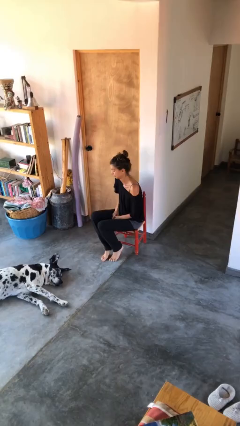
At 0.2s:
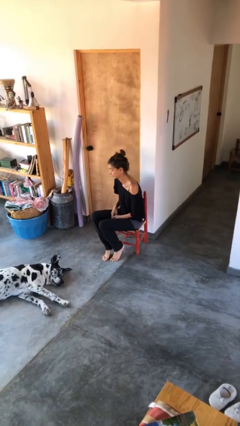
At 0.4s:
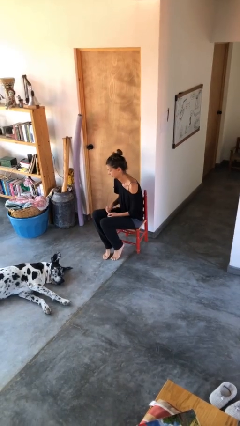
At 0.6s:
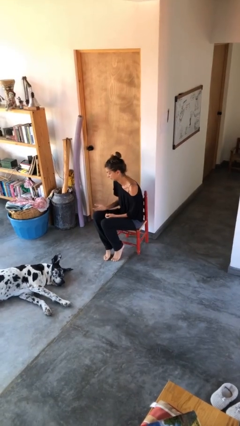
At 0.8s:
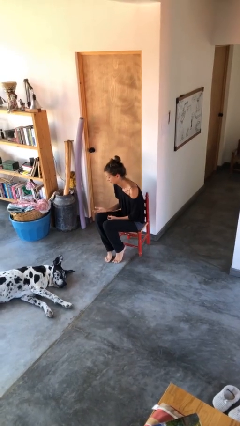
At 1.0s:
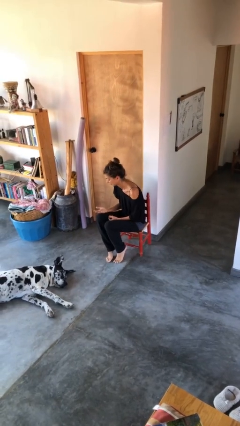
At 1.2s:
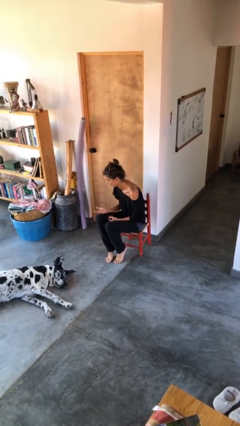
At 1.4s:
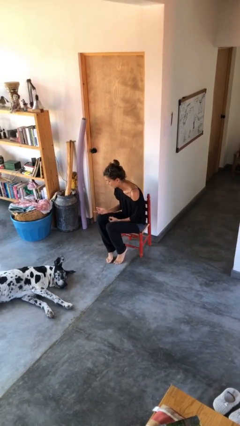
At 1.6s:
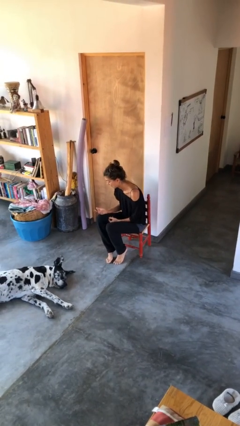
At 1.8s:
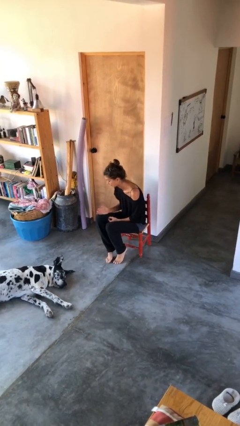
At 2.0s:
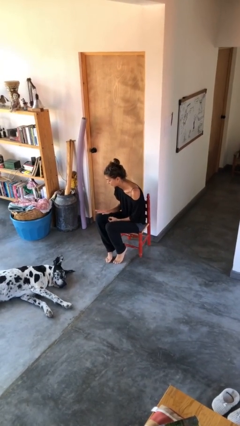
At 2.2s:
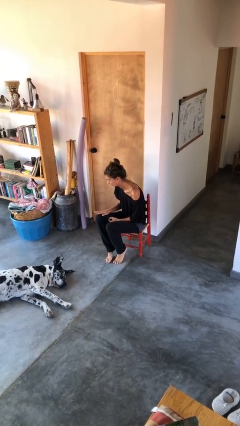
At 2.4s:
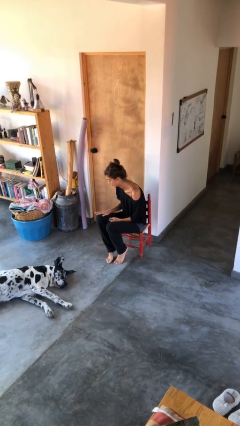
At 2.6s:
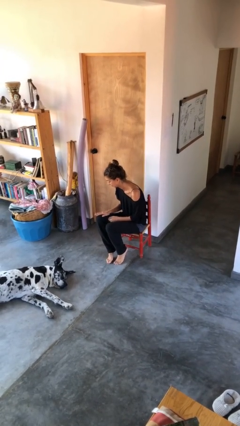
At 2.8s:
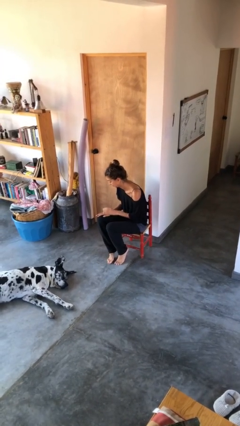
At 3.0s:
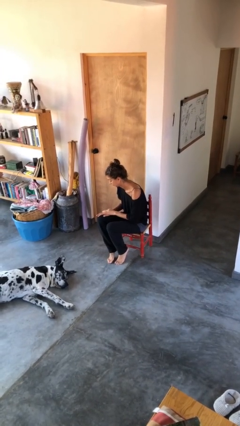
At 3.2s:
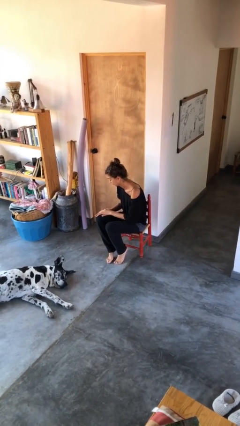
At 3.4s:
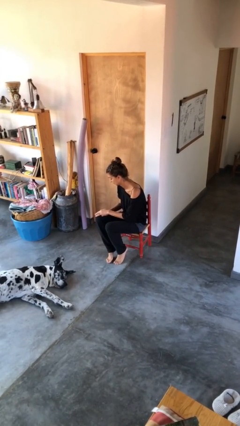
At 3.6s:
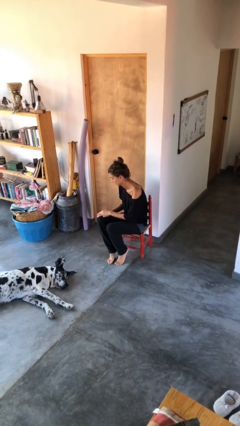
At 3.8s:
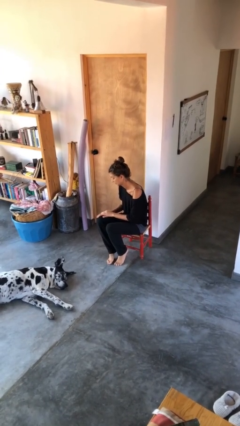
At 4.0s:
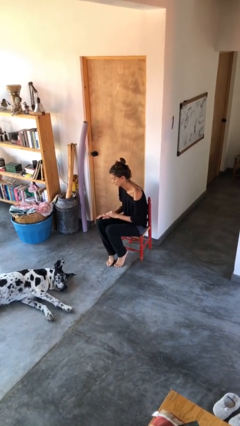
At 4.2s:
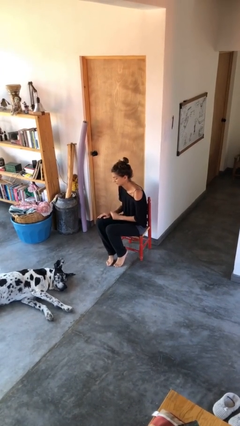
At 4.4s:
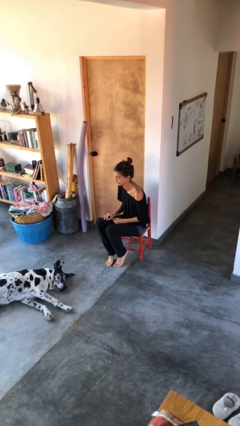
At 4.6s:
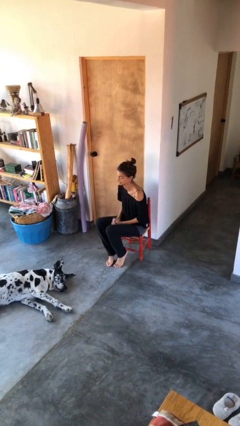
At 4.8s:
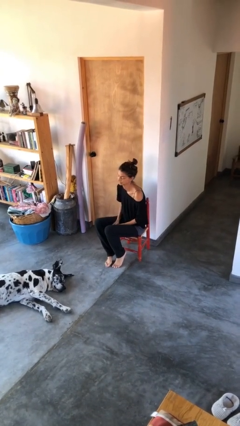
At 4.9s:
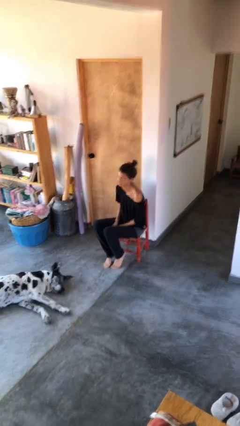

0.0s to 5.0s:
person looks at hands in lap

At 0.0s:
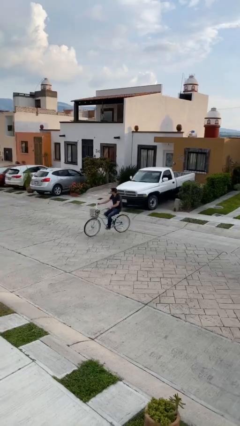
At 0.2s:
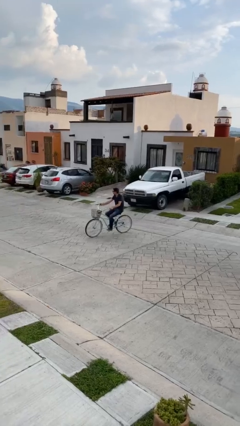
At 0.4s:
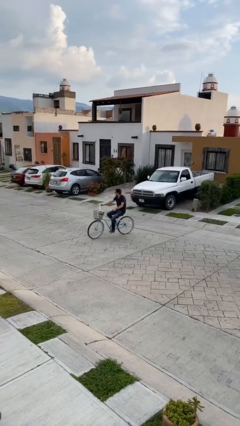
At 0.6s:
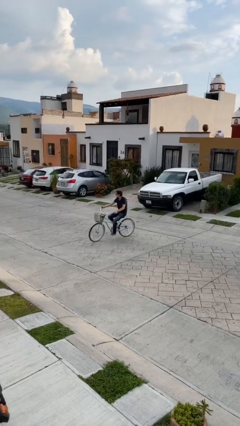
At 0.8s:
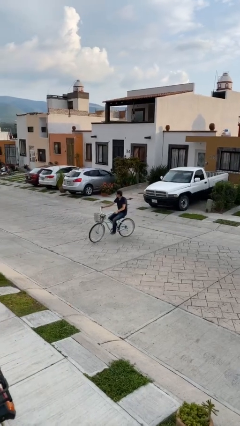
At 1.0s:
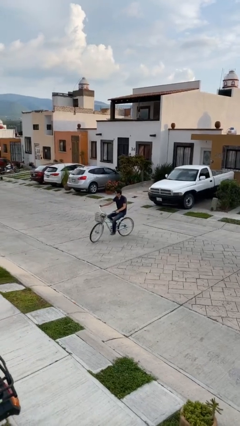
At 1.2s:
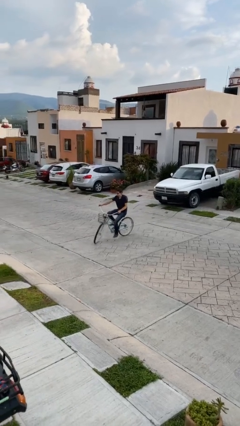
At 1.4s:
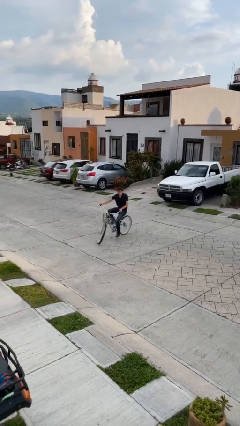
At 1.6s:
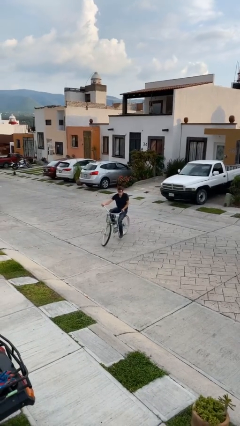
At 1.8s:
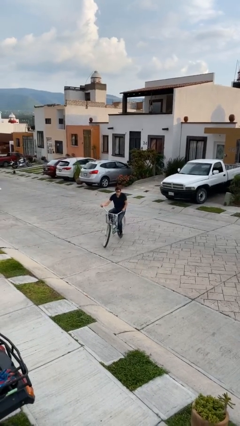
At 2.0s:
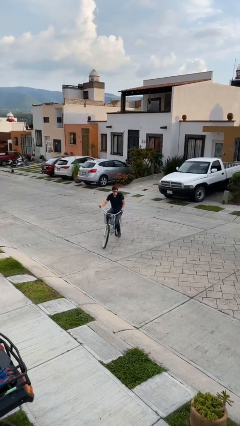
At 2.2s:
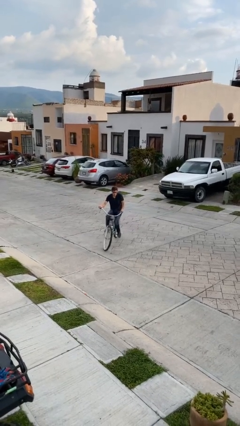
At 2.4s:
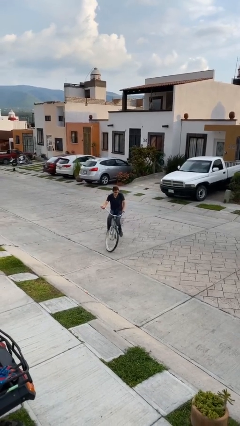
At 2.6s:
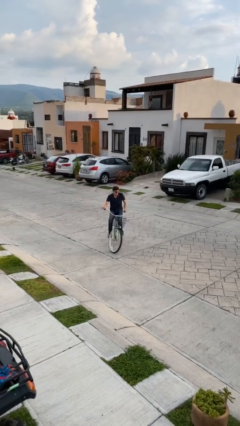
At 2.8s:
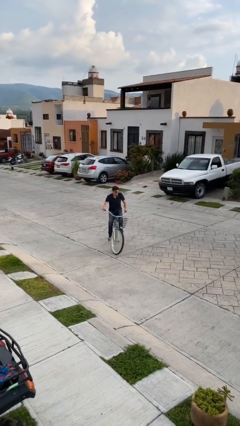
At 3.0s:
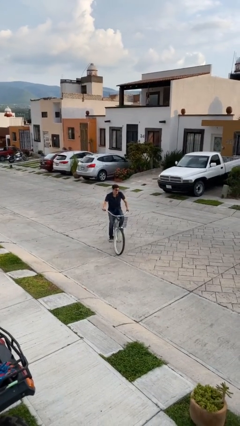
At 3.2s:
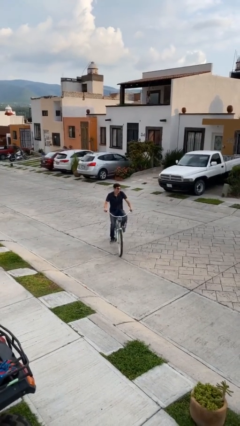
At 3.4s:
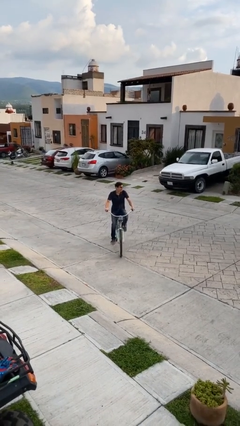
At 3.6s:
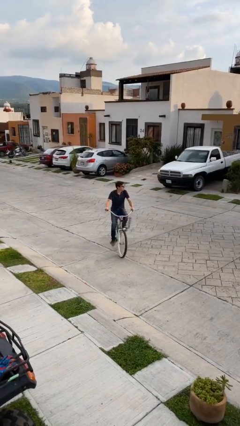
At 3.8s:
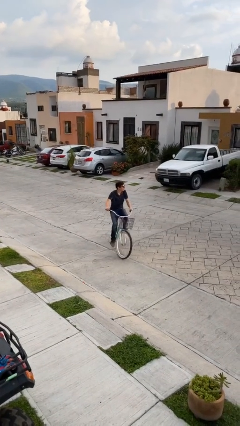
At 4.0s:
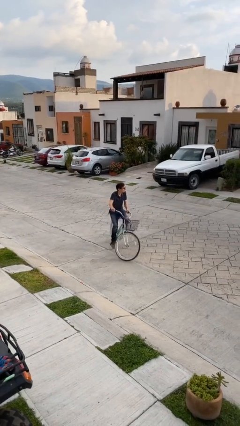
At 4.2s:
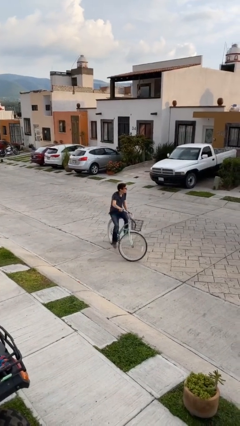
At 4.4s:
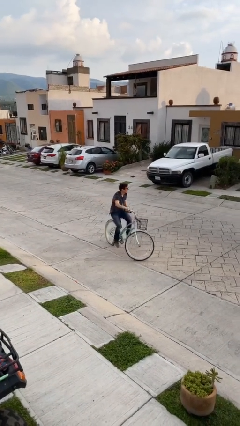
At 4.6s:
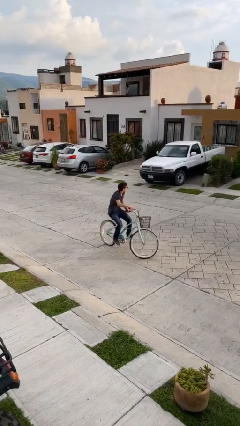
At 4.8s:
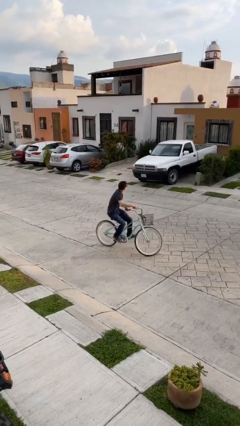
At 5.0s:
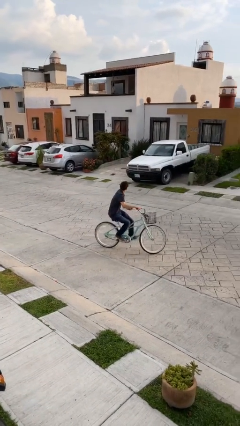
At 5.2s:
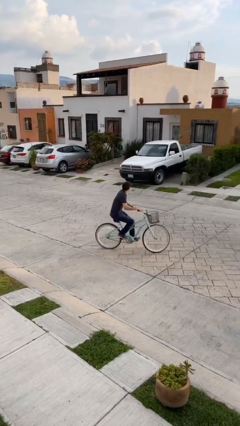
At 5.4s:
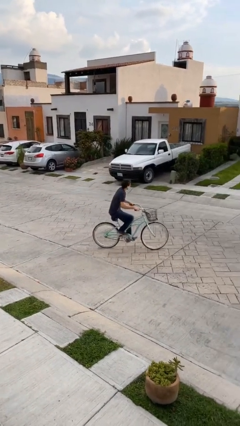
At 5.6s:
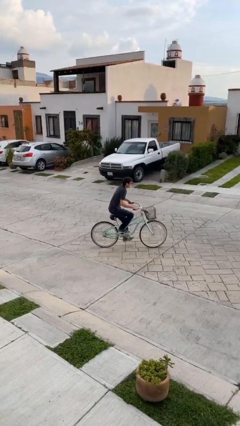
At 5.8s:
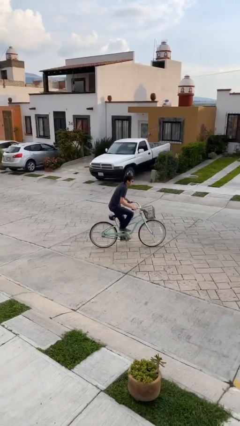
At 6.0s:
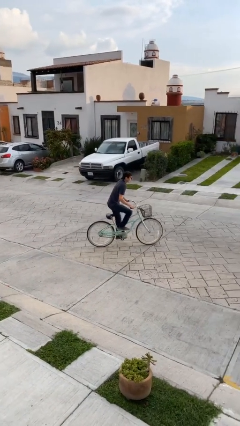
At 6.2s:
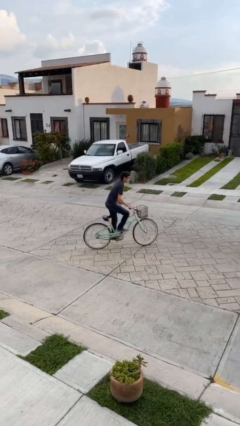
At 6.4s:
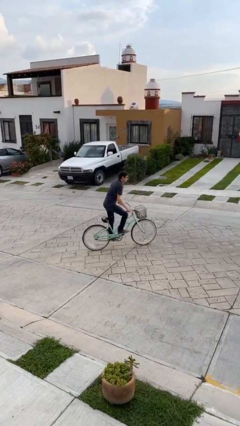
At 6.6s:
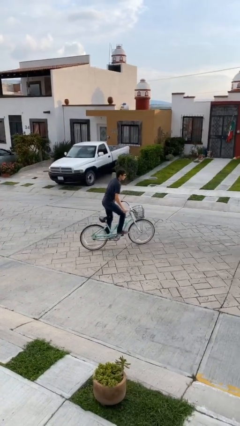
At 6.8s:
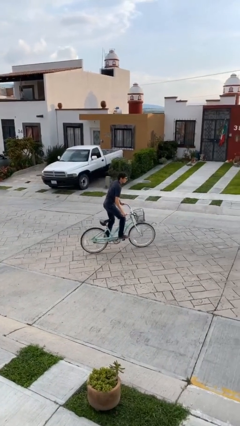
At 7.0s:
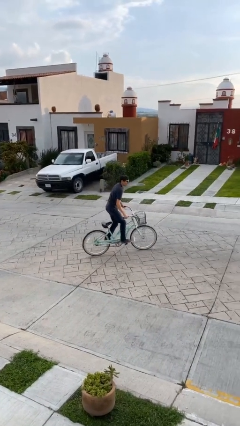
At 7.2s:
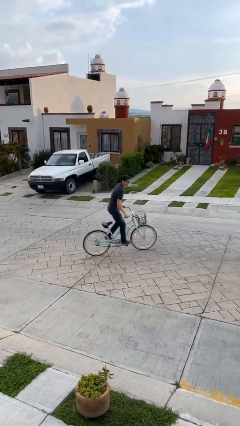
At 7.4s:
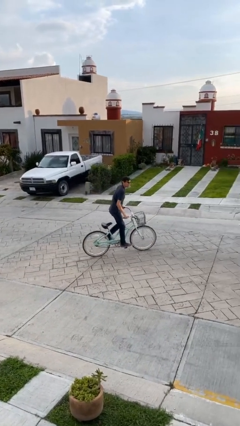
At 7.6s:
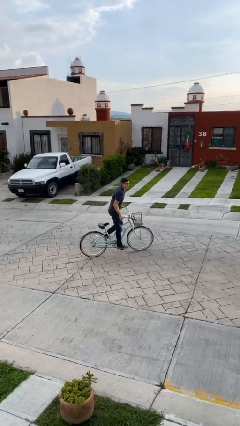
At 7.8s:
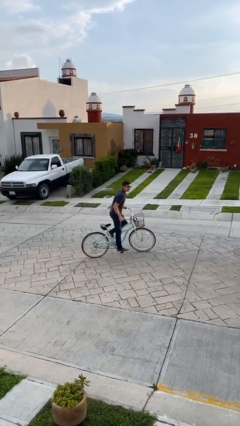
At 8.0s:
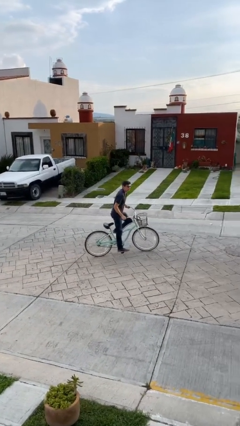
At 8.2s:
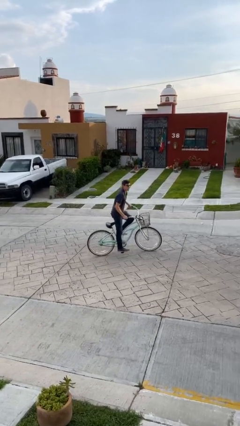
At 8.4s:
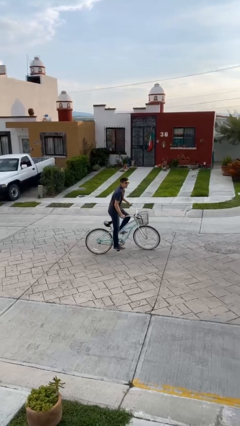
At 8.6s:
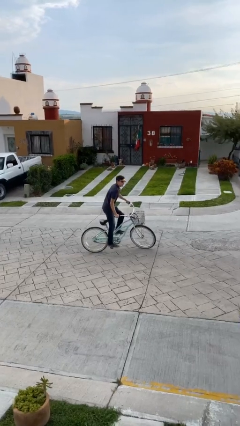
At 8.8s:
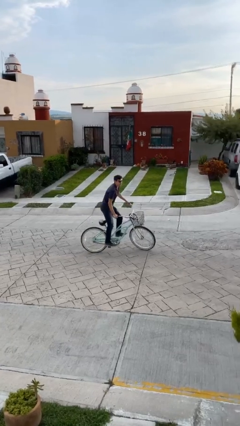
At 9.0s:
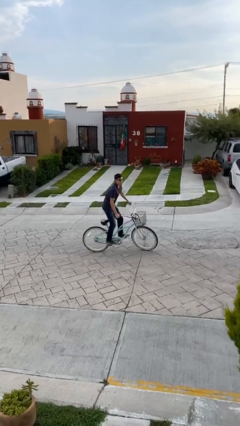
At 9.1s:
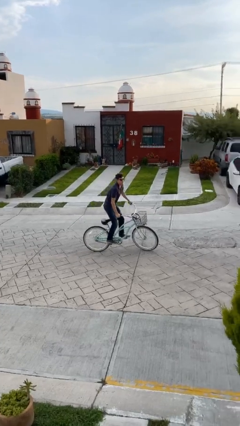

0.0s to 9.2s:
person rides bicycle

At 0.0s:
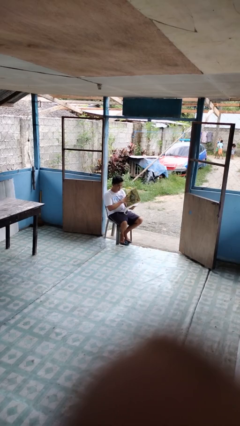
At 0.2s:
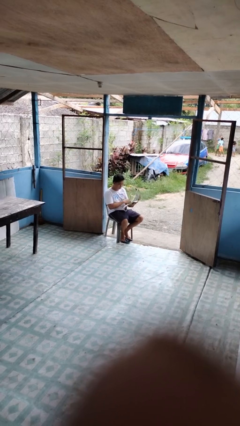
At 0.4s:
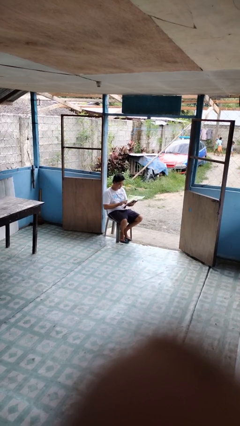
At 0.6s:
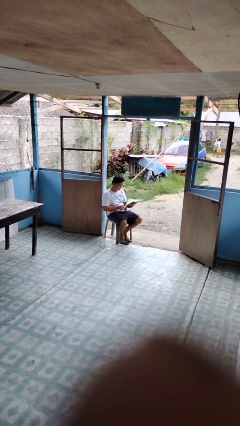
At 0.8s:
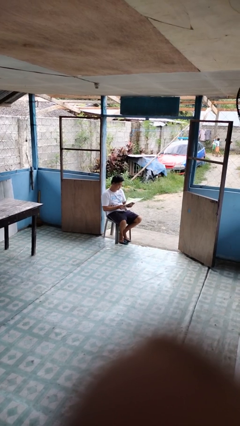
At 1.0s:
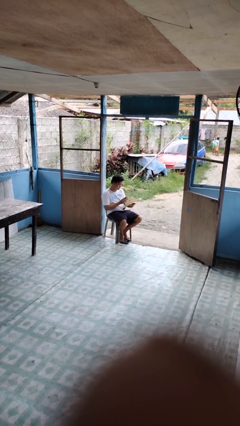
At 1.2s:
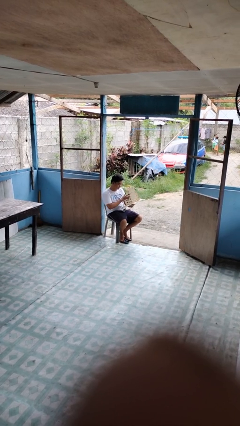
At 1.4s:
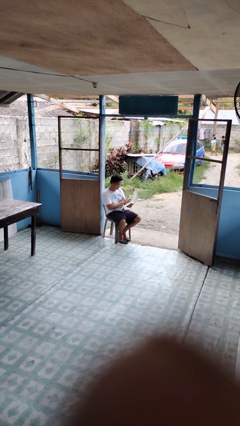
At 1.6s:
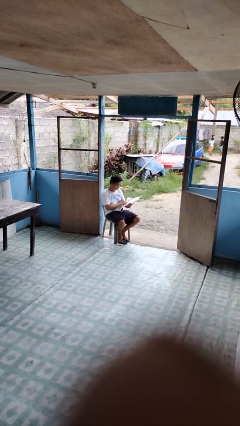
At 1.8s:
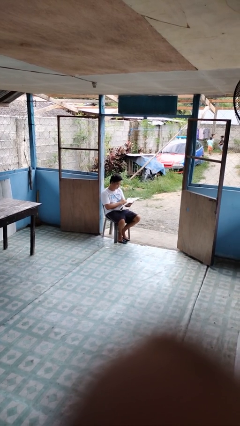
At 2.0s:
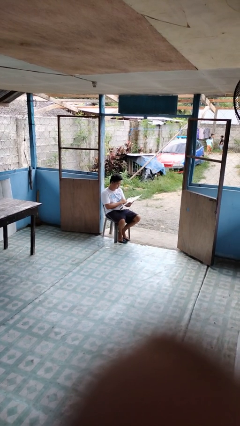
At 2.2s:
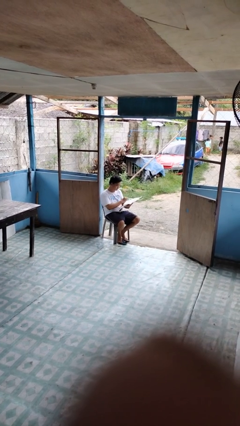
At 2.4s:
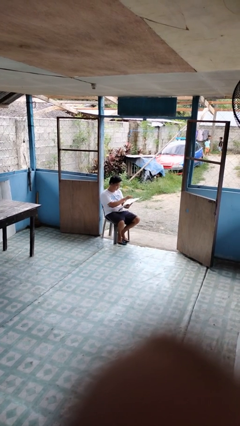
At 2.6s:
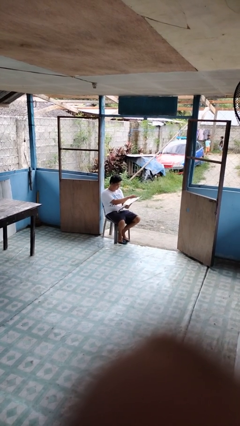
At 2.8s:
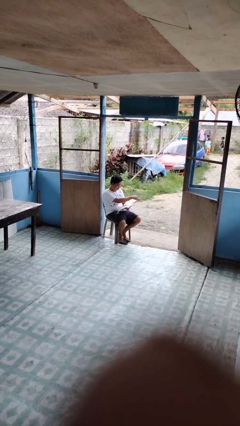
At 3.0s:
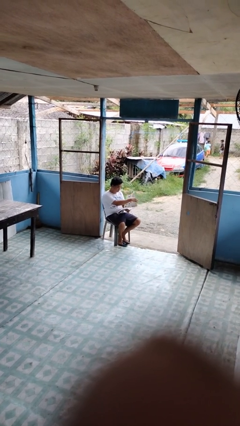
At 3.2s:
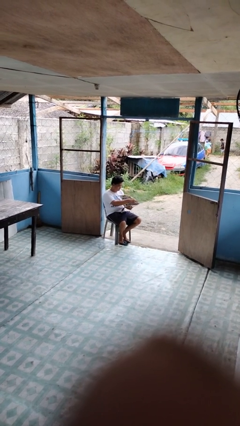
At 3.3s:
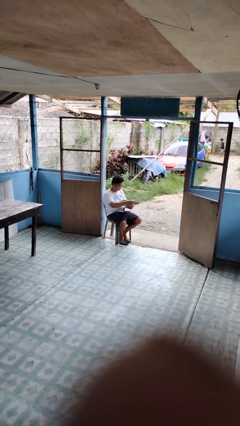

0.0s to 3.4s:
person reads newspaper

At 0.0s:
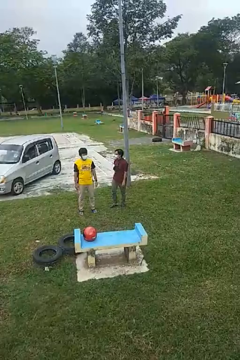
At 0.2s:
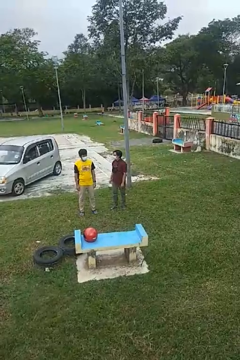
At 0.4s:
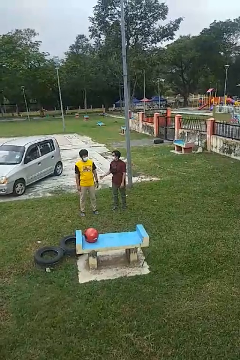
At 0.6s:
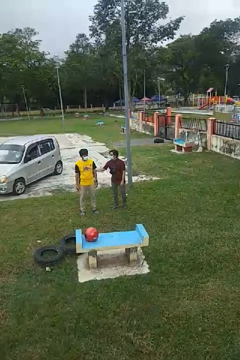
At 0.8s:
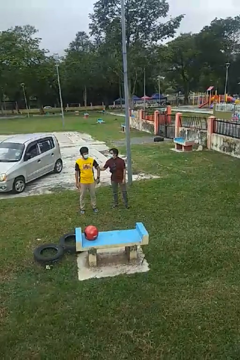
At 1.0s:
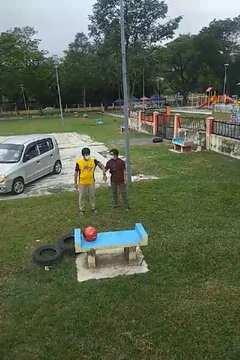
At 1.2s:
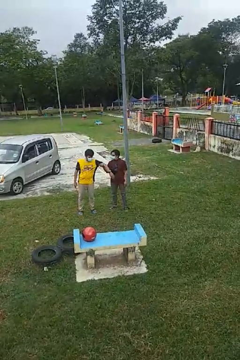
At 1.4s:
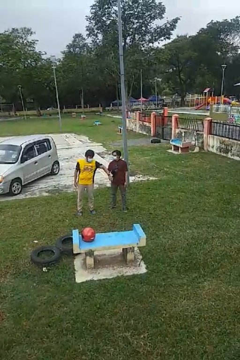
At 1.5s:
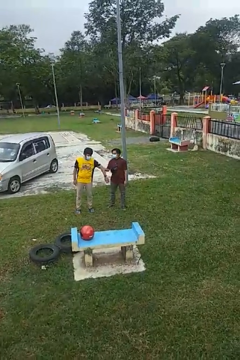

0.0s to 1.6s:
person grabs person by bicep
